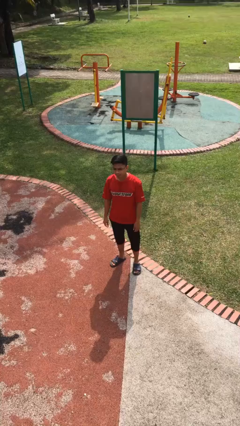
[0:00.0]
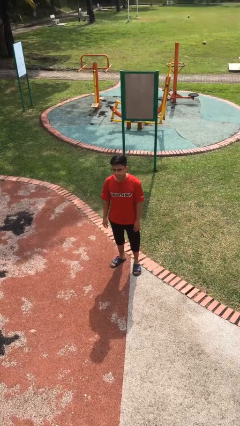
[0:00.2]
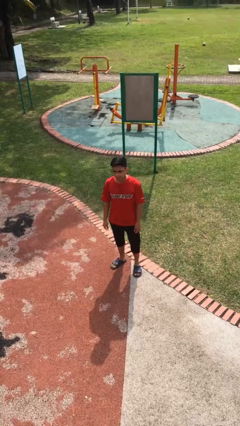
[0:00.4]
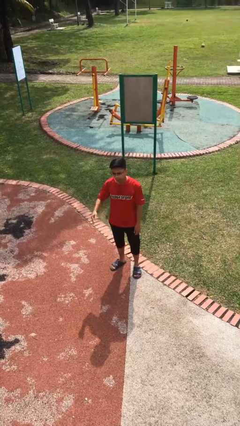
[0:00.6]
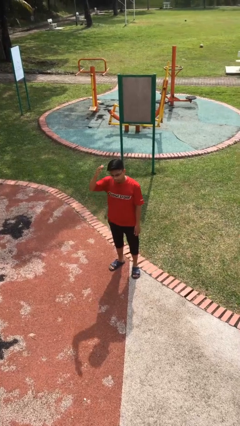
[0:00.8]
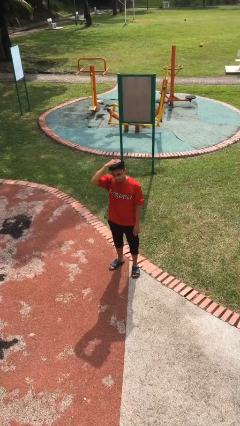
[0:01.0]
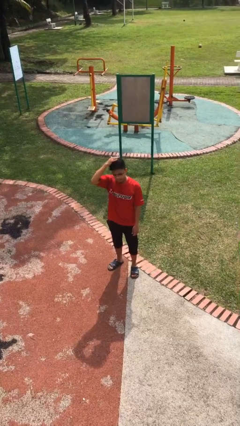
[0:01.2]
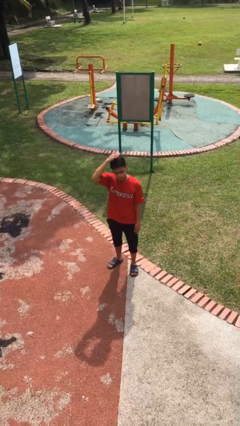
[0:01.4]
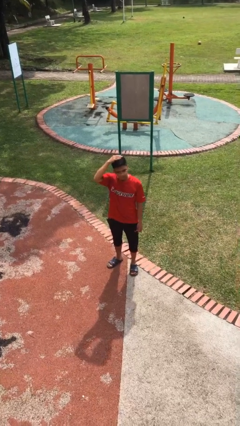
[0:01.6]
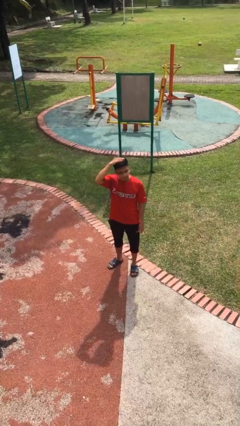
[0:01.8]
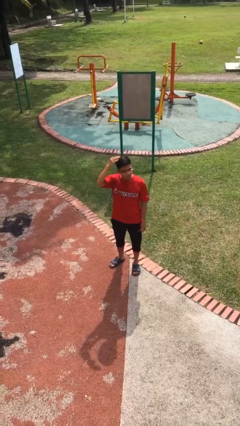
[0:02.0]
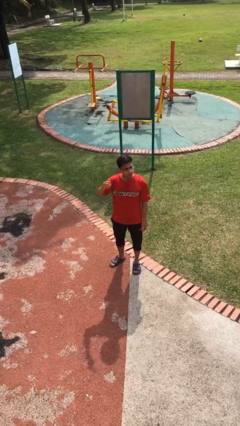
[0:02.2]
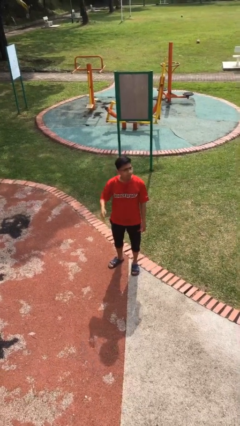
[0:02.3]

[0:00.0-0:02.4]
person pats head

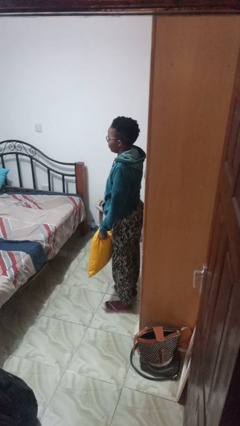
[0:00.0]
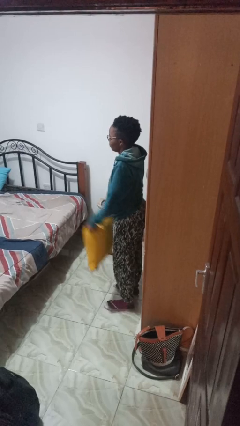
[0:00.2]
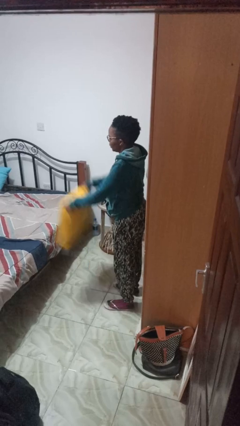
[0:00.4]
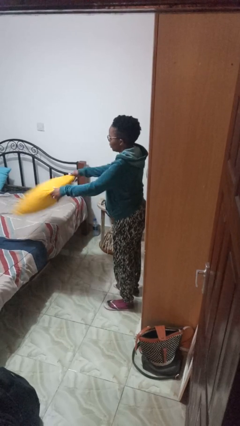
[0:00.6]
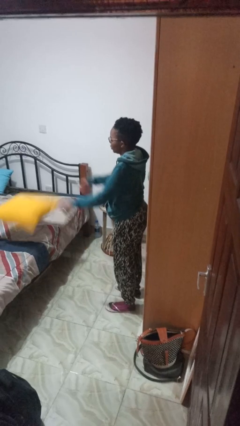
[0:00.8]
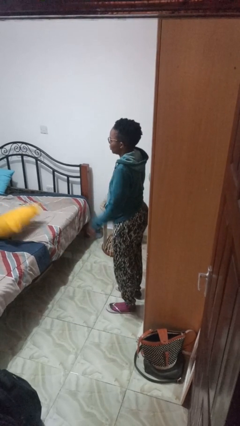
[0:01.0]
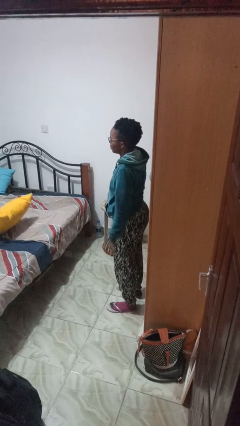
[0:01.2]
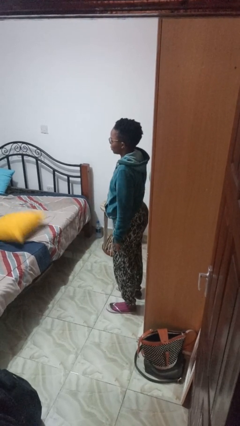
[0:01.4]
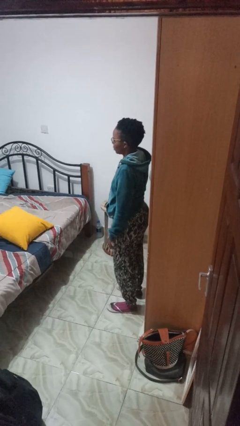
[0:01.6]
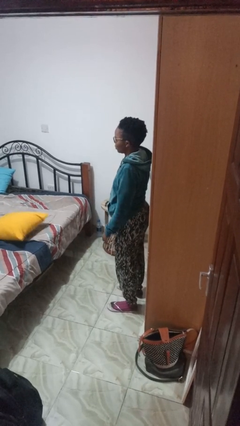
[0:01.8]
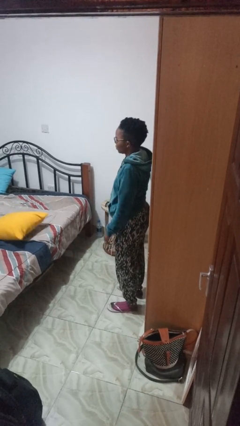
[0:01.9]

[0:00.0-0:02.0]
person throws object on bed

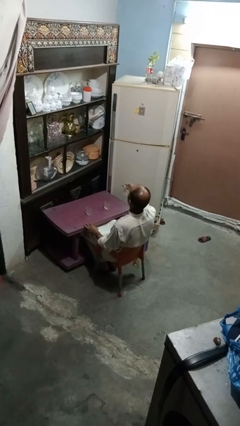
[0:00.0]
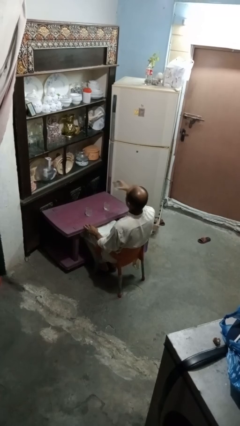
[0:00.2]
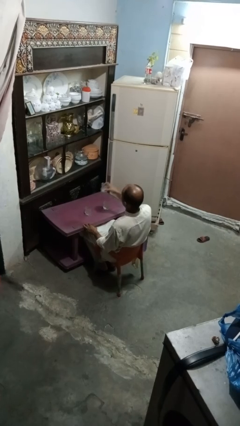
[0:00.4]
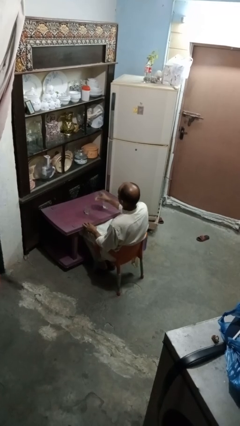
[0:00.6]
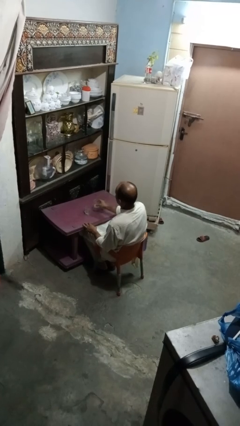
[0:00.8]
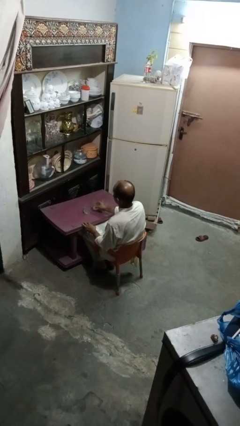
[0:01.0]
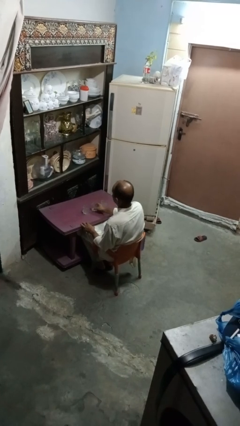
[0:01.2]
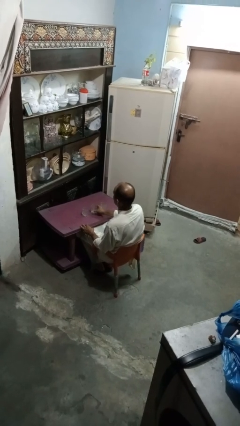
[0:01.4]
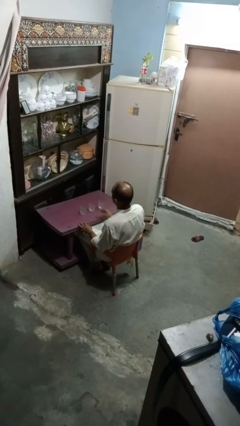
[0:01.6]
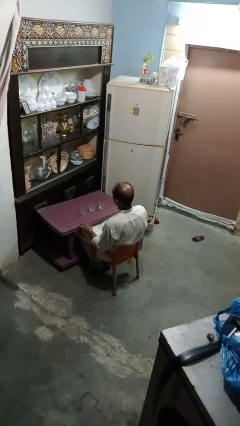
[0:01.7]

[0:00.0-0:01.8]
person puts down object on table

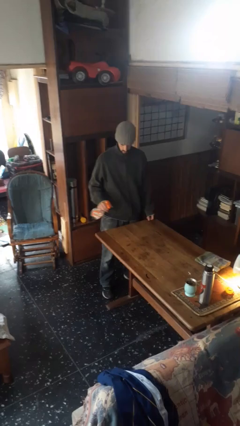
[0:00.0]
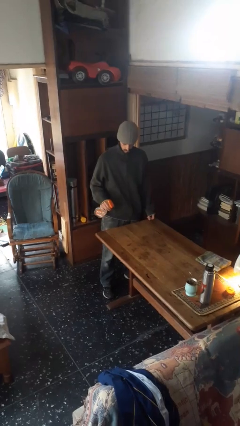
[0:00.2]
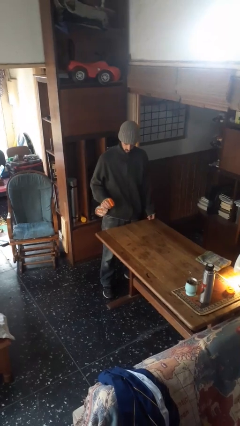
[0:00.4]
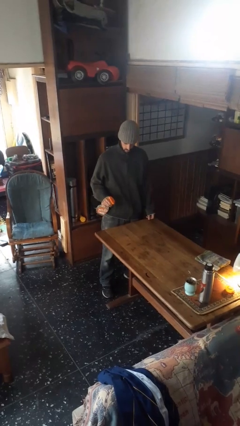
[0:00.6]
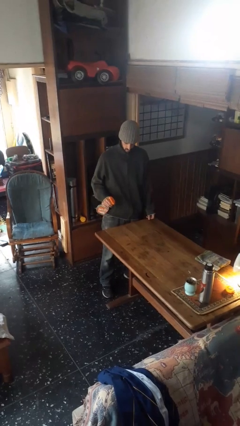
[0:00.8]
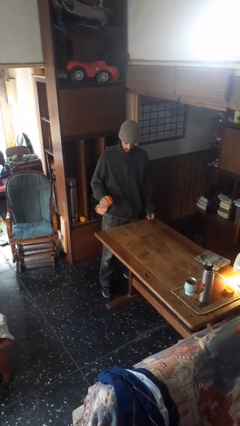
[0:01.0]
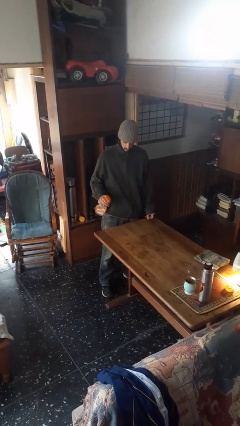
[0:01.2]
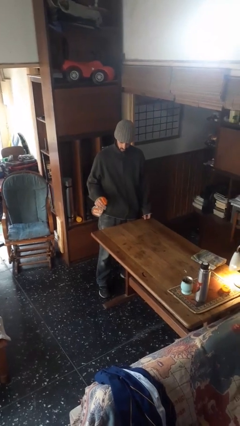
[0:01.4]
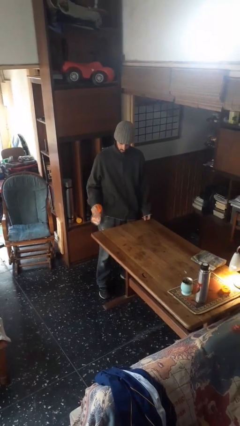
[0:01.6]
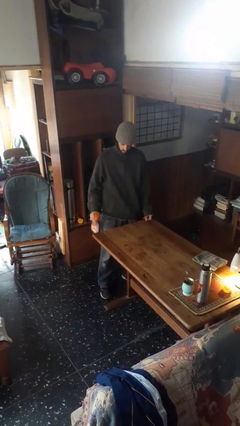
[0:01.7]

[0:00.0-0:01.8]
person sprays from bottle

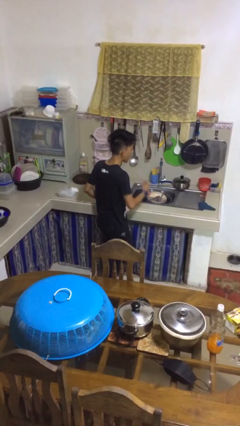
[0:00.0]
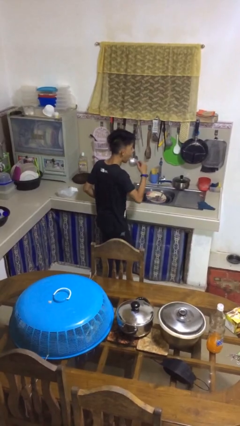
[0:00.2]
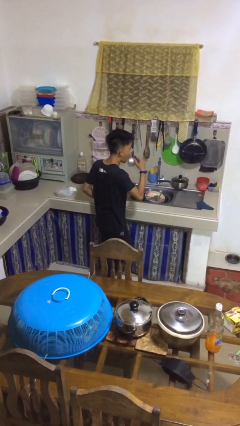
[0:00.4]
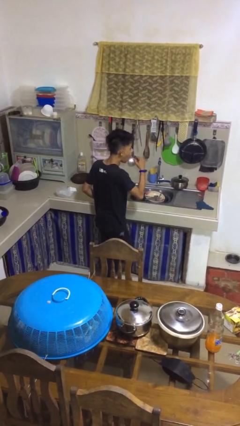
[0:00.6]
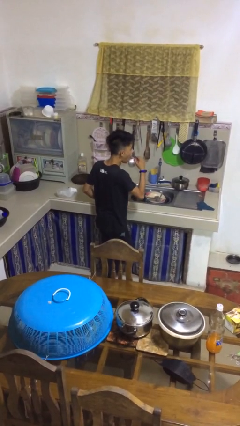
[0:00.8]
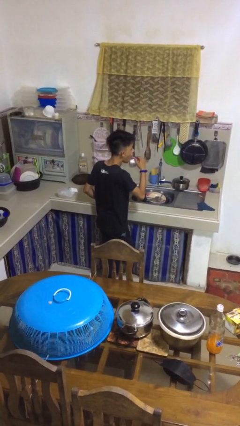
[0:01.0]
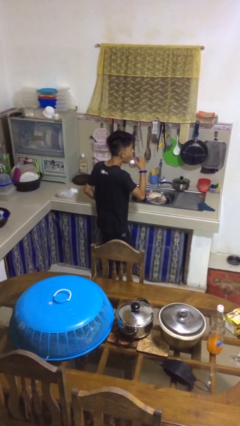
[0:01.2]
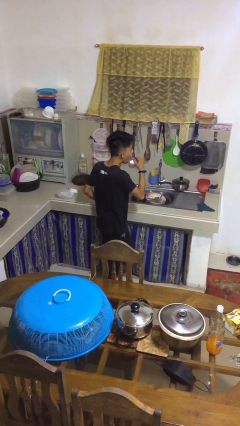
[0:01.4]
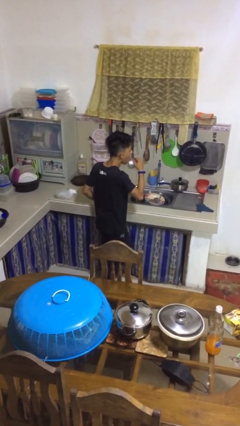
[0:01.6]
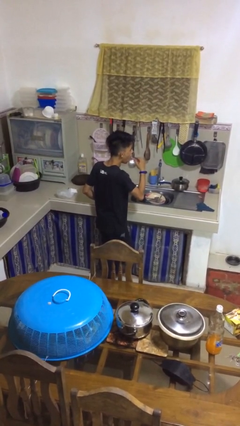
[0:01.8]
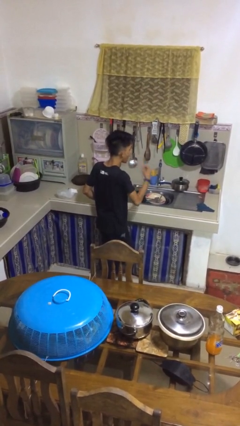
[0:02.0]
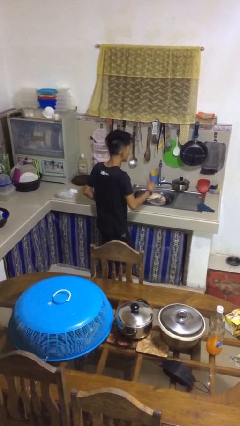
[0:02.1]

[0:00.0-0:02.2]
person brushes teeth

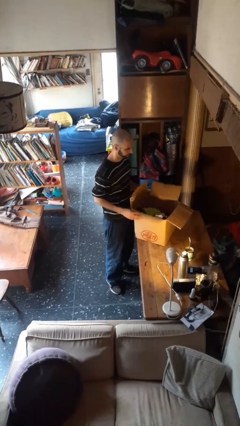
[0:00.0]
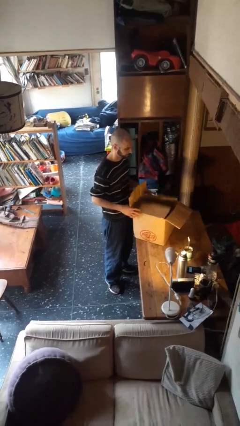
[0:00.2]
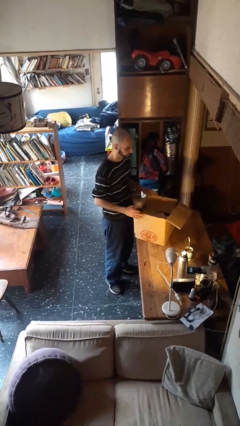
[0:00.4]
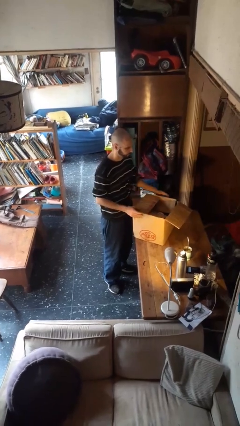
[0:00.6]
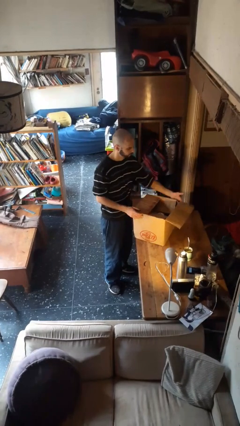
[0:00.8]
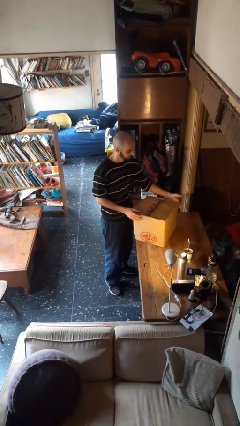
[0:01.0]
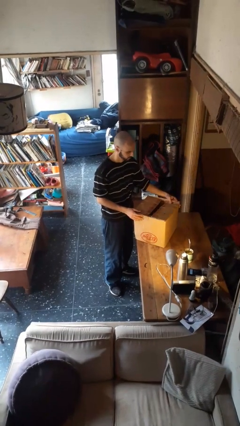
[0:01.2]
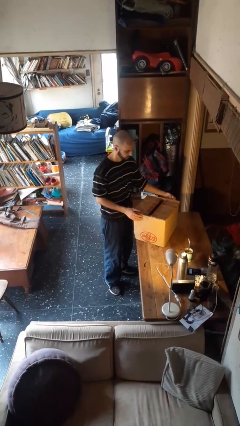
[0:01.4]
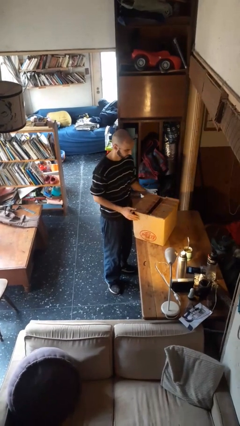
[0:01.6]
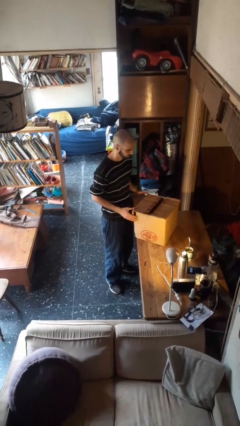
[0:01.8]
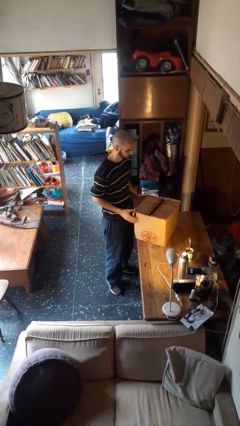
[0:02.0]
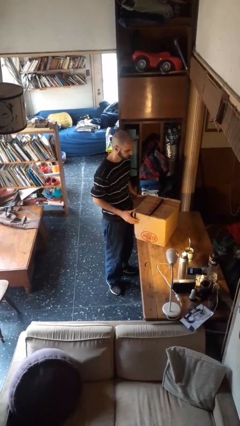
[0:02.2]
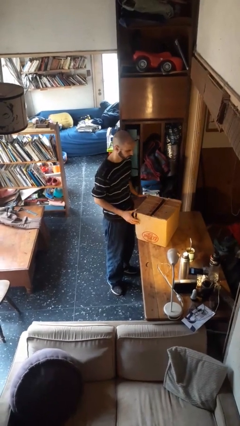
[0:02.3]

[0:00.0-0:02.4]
person closes box

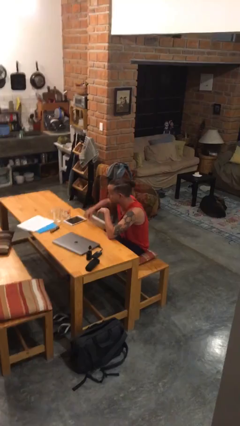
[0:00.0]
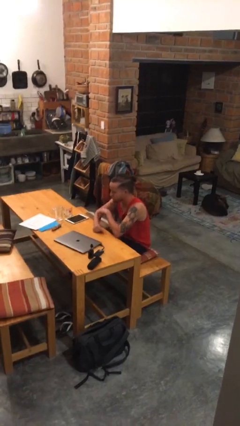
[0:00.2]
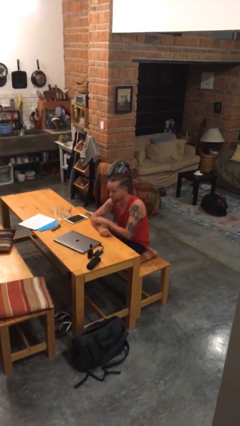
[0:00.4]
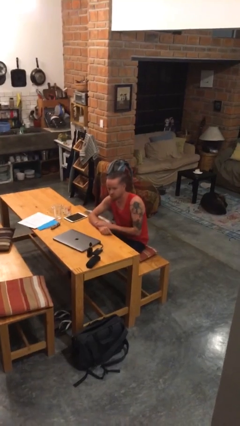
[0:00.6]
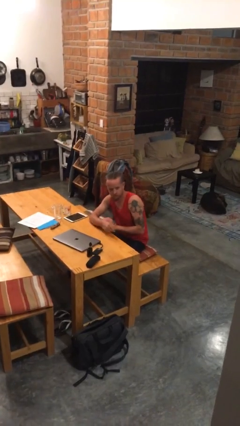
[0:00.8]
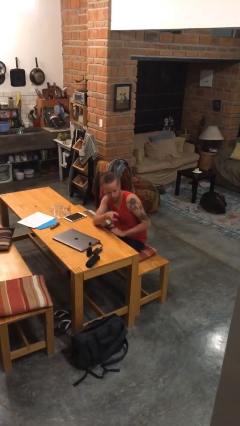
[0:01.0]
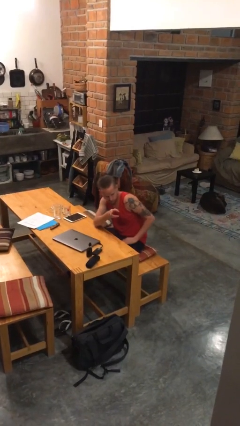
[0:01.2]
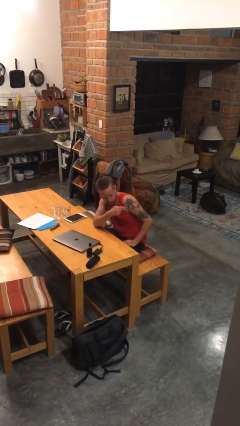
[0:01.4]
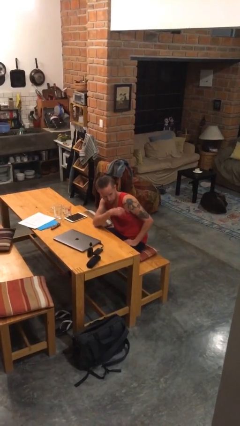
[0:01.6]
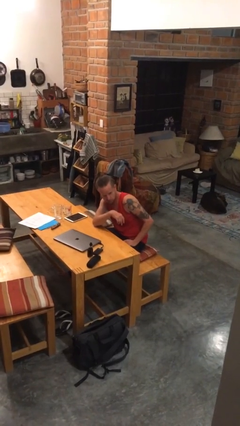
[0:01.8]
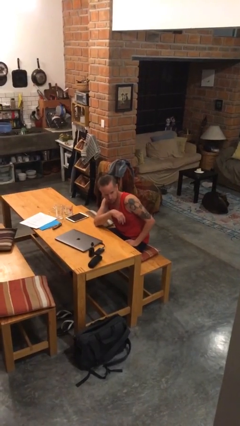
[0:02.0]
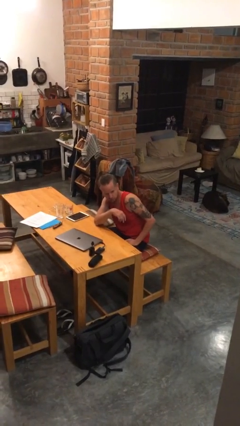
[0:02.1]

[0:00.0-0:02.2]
person gestures swipe left

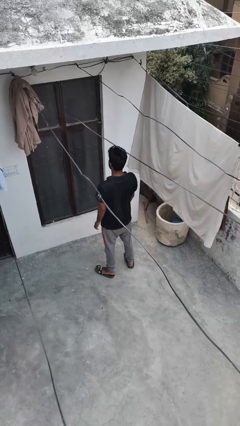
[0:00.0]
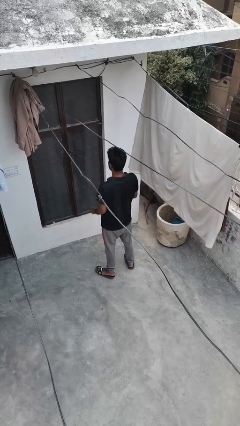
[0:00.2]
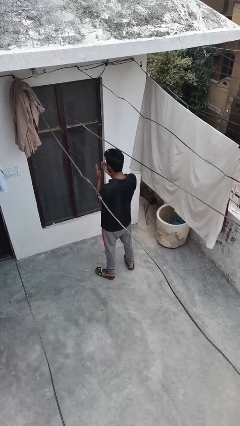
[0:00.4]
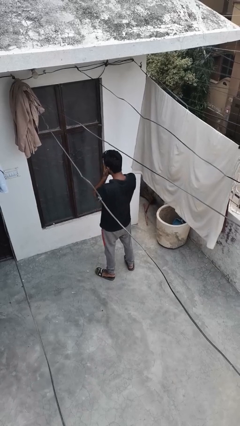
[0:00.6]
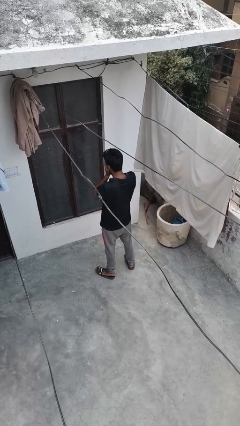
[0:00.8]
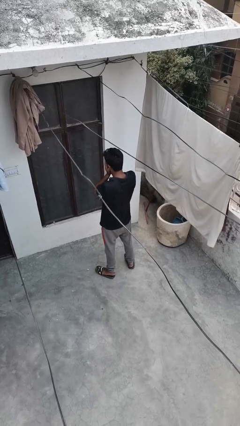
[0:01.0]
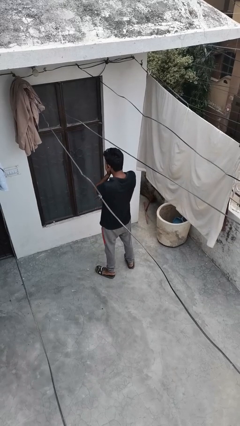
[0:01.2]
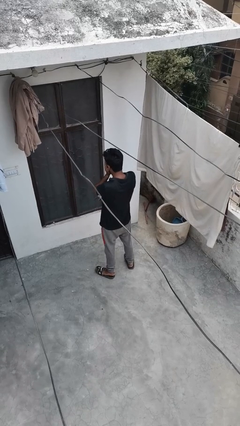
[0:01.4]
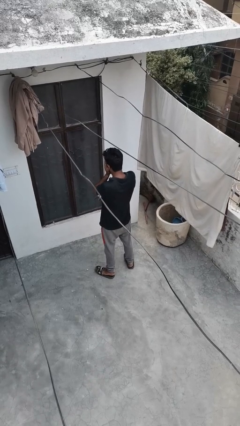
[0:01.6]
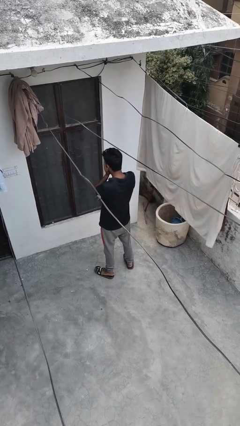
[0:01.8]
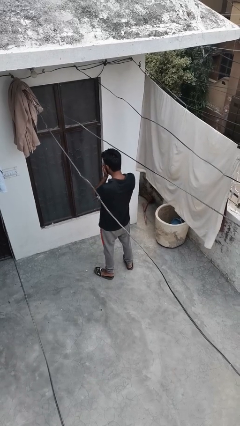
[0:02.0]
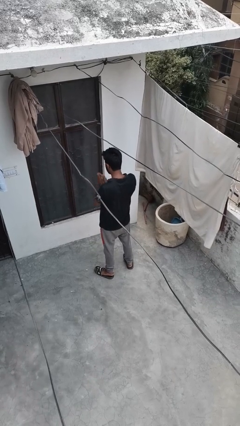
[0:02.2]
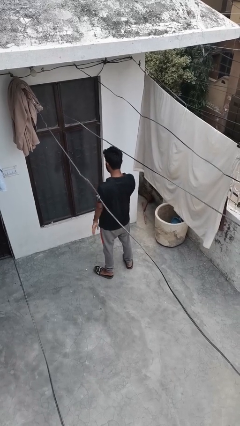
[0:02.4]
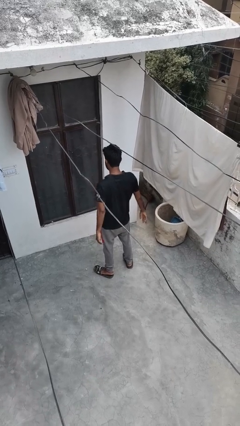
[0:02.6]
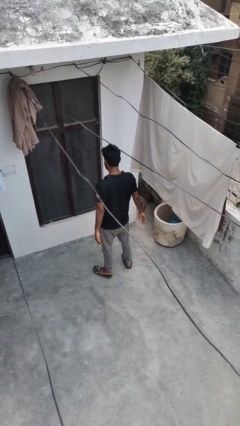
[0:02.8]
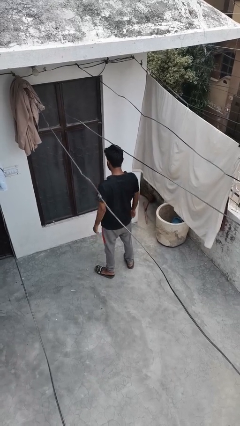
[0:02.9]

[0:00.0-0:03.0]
person covers face with hands
